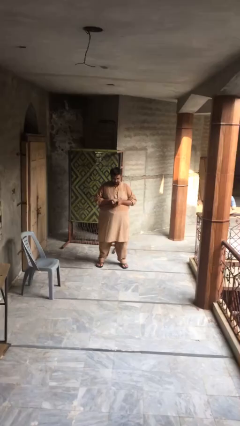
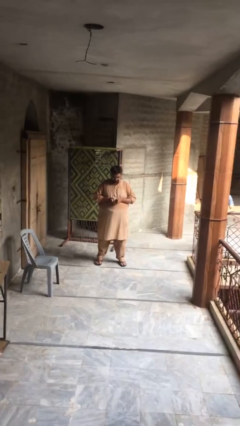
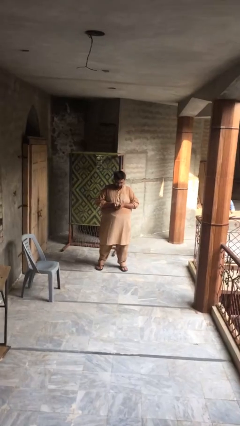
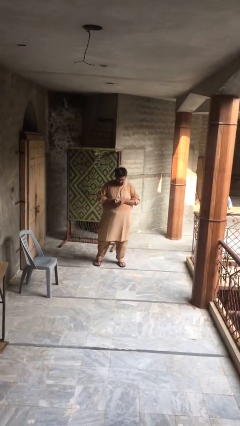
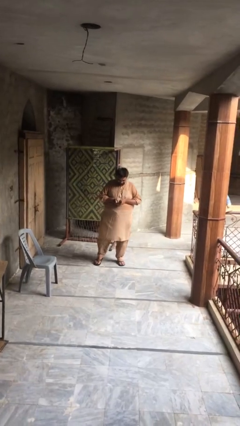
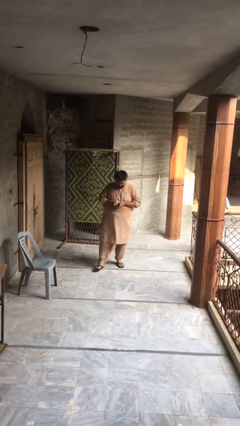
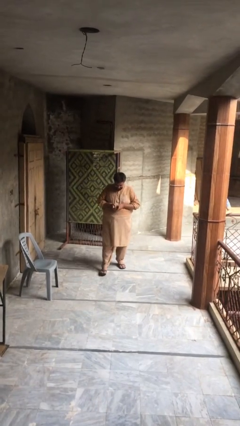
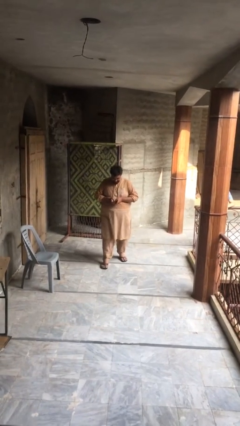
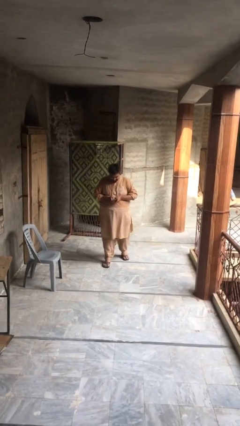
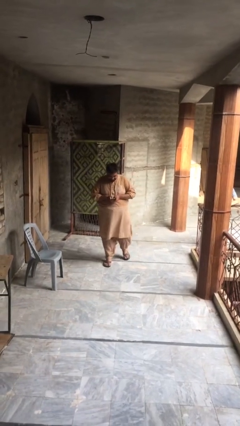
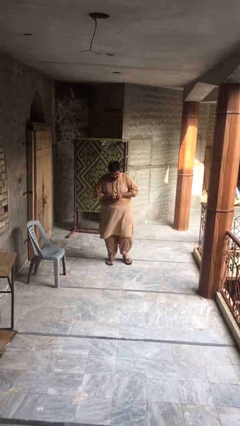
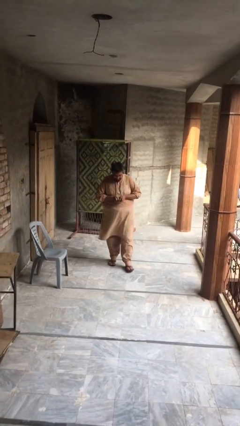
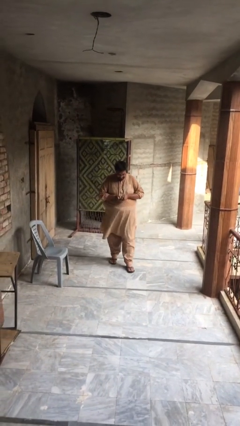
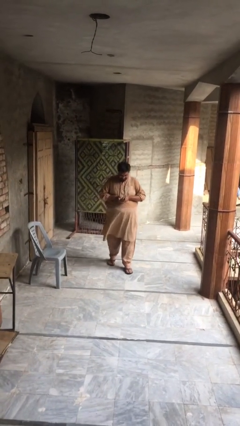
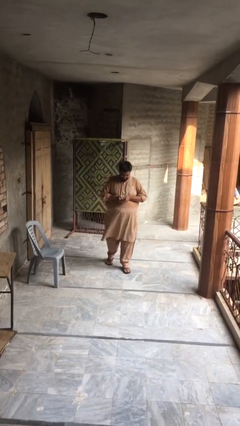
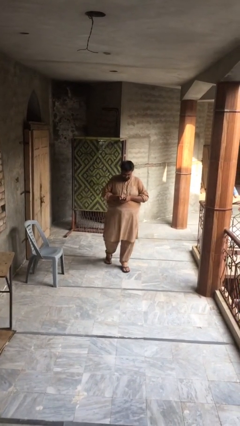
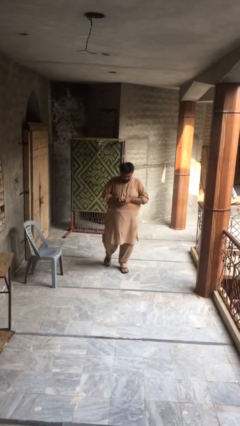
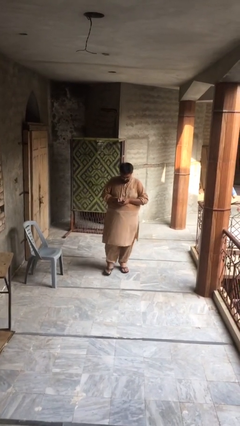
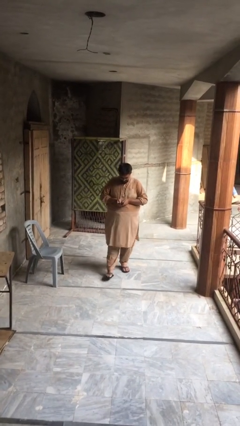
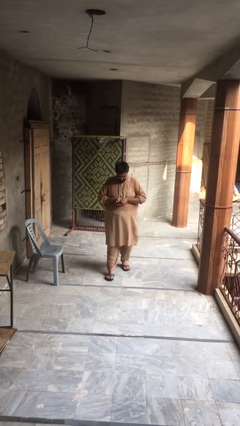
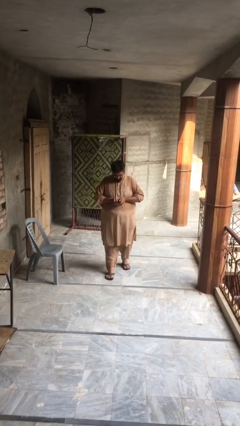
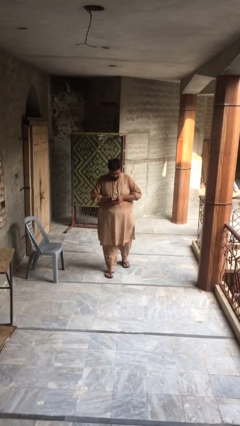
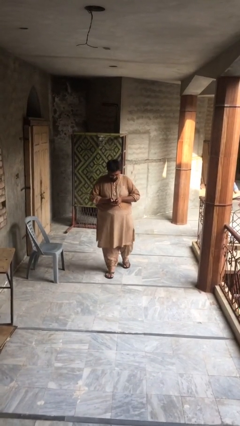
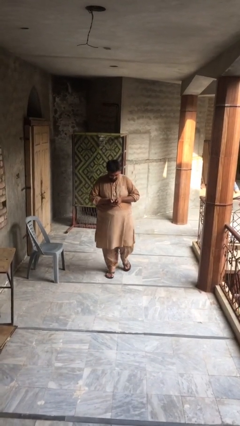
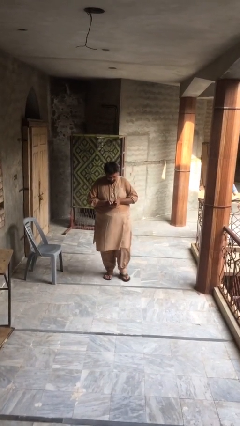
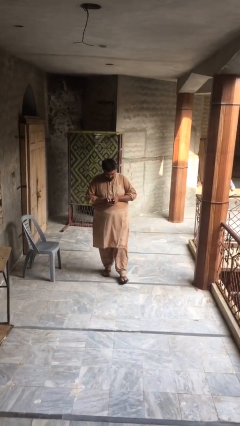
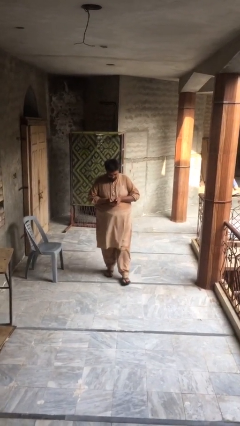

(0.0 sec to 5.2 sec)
person texts on phone

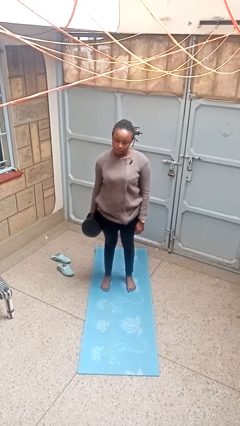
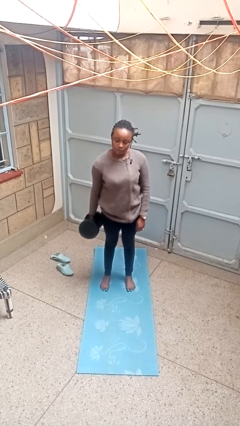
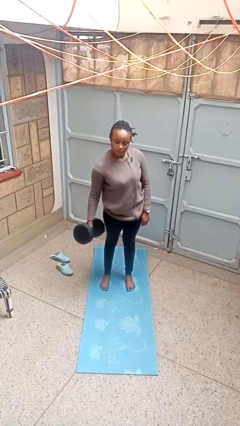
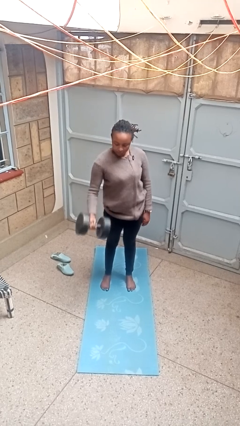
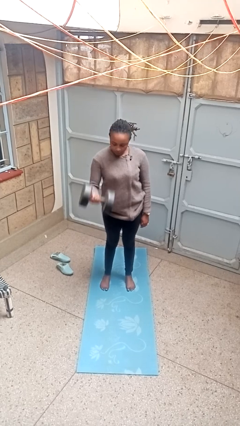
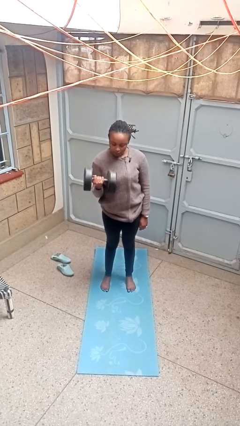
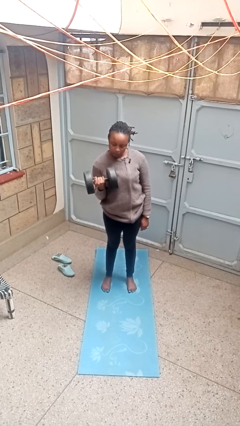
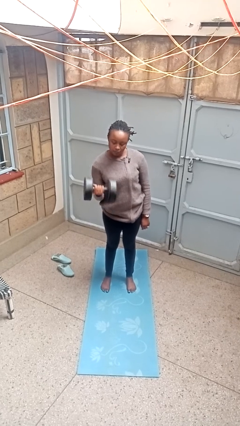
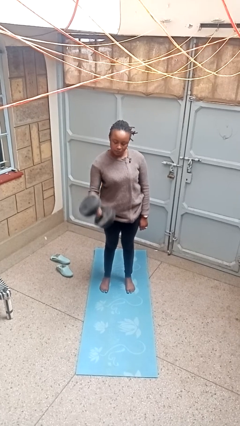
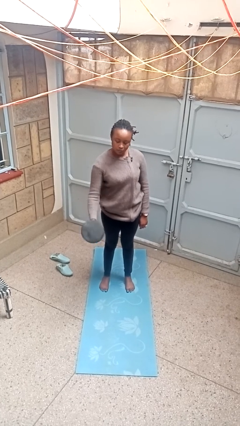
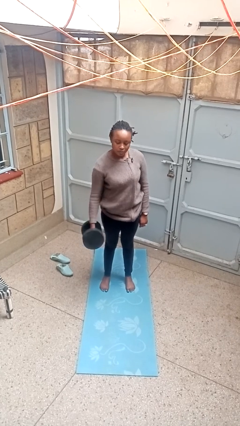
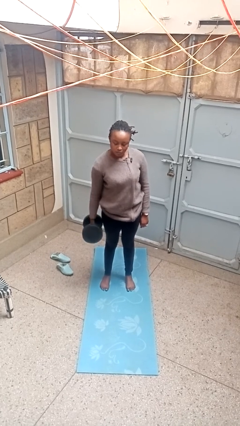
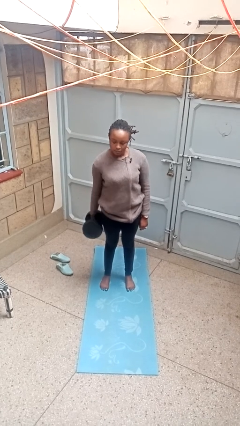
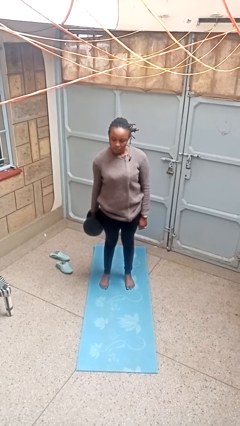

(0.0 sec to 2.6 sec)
person lifts dumbbells

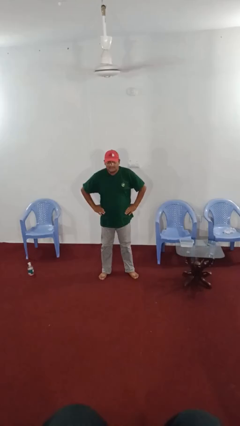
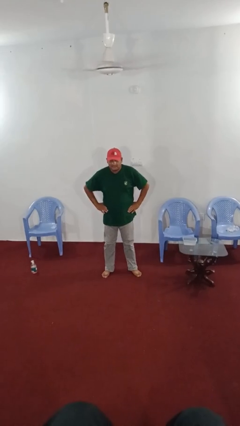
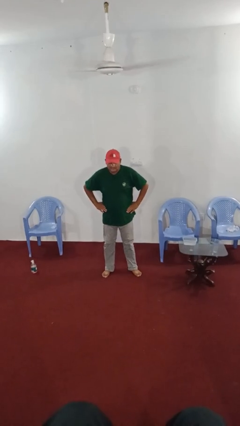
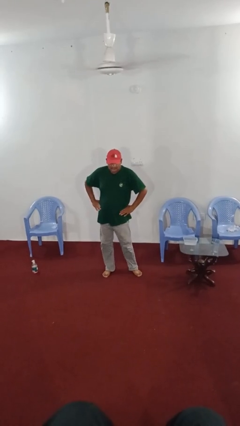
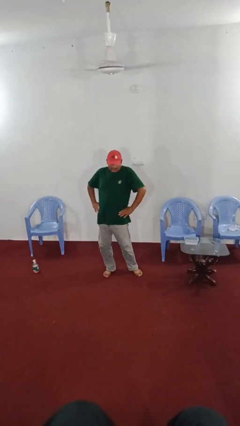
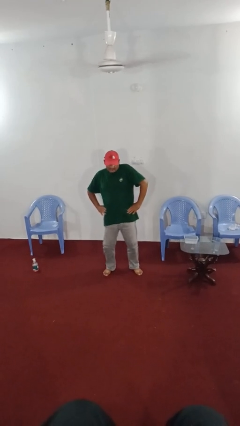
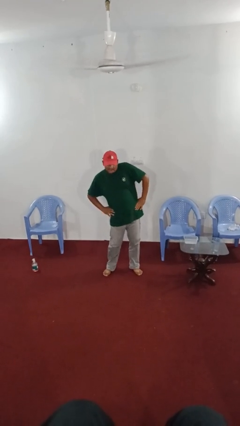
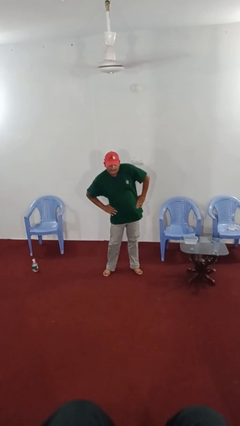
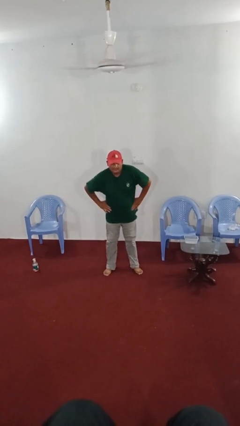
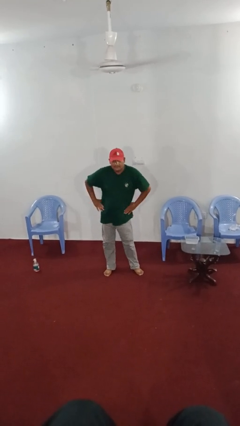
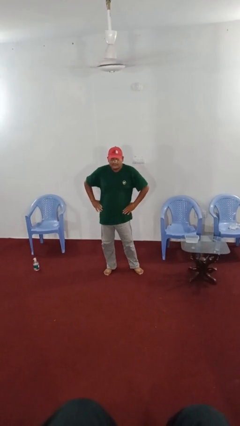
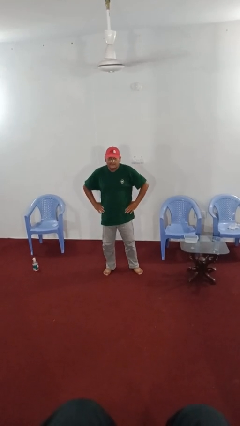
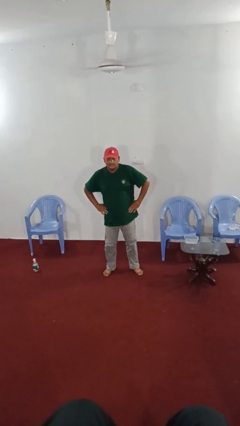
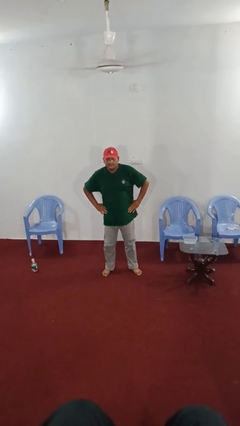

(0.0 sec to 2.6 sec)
person wiggles hips

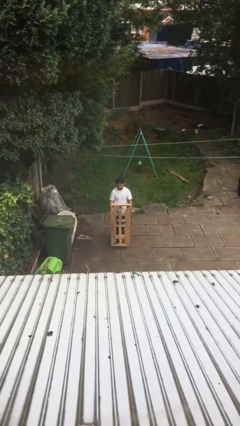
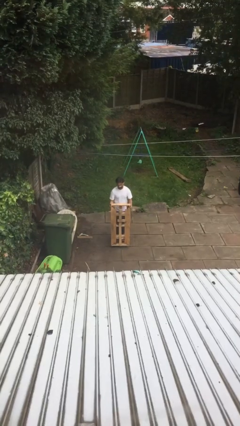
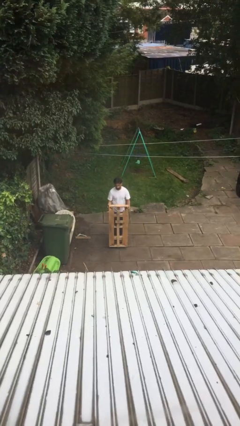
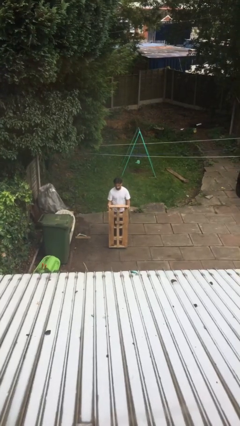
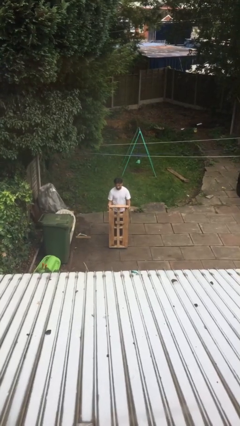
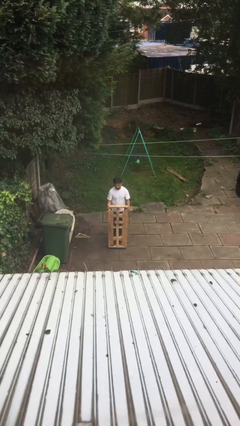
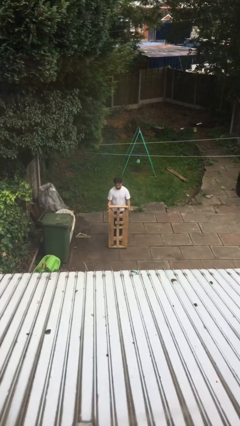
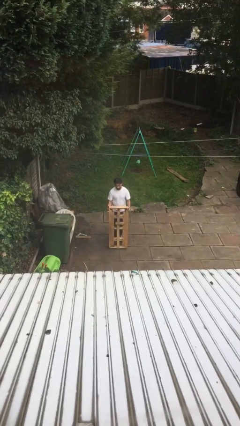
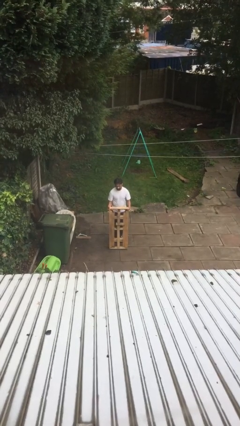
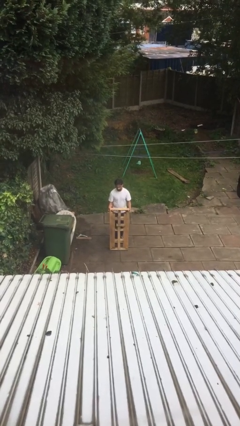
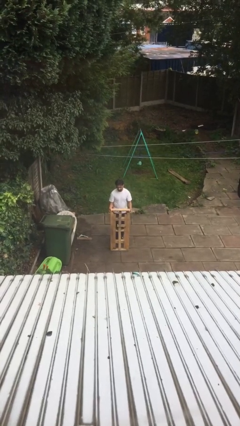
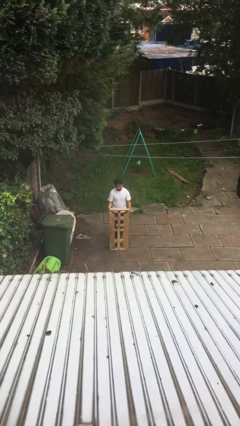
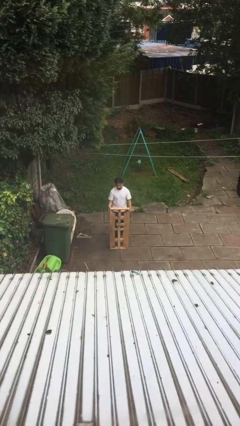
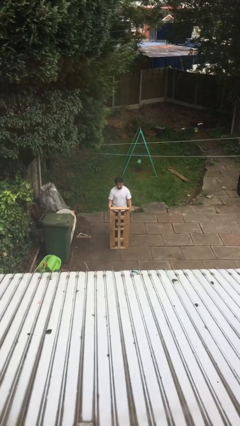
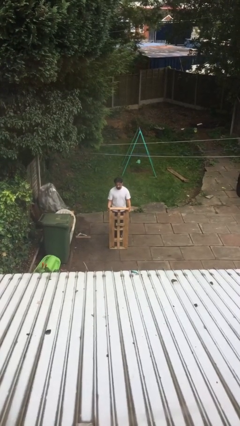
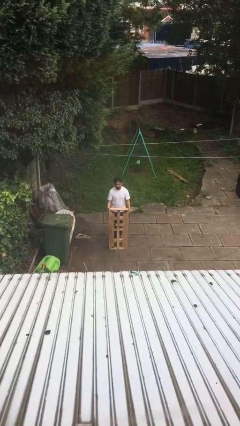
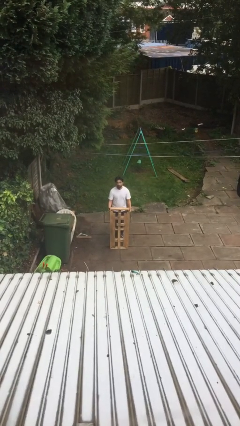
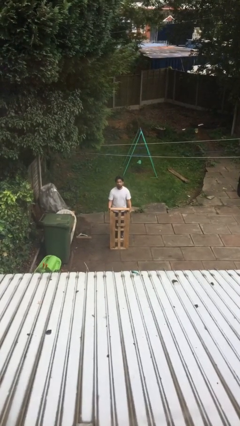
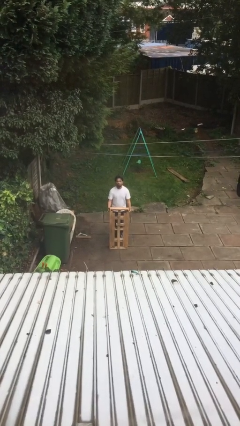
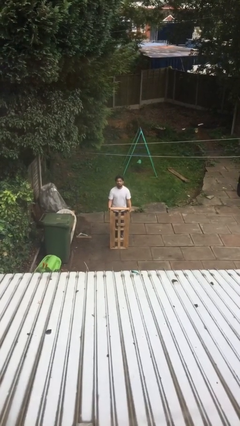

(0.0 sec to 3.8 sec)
person puts down object on floor

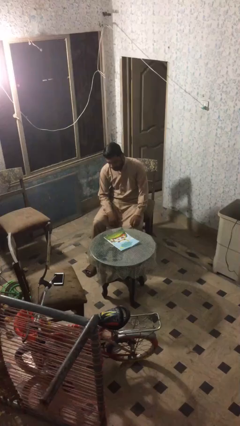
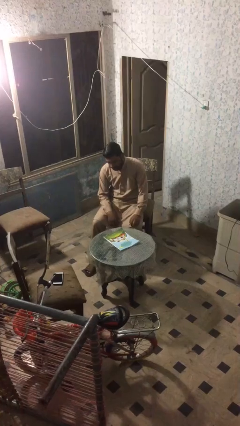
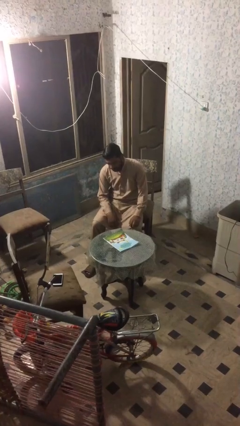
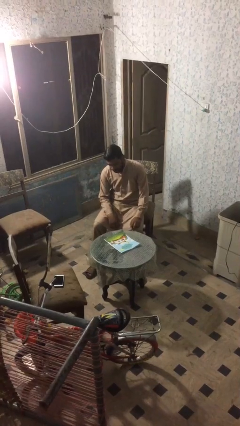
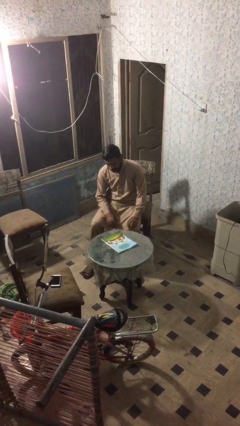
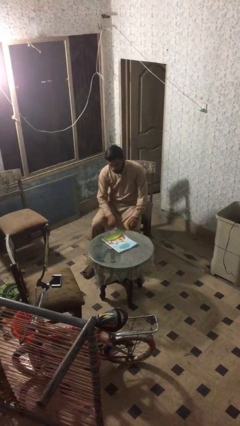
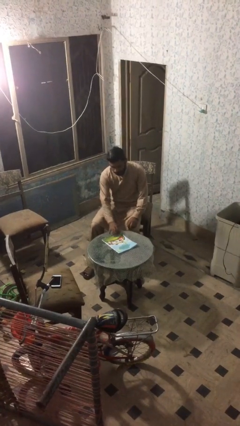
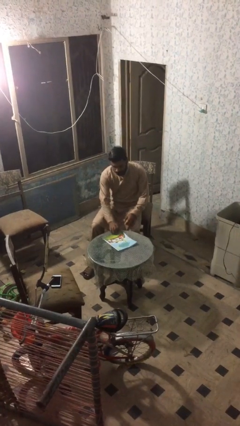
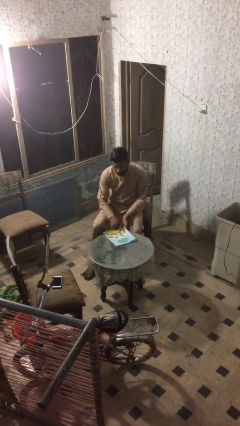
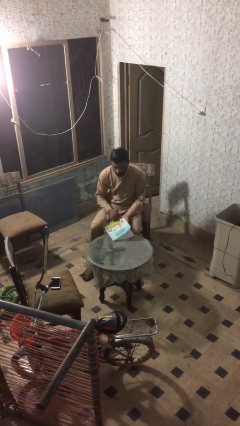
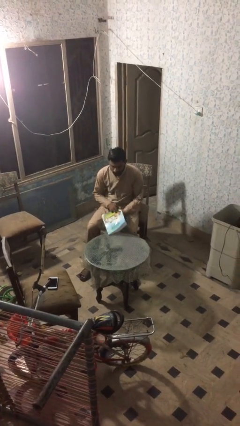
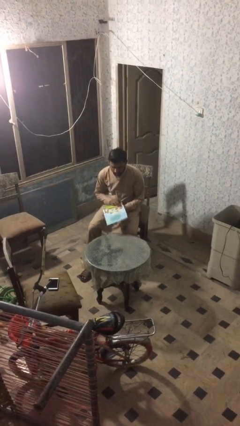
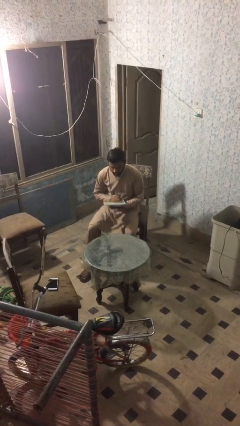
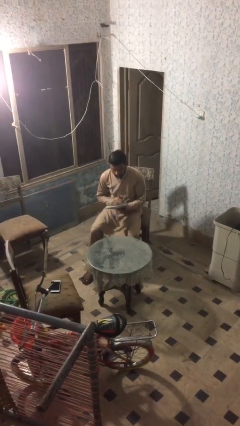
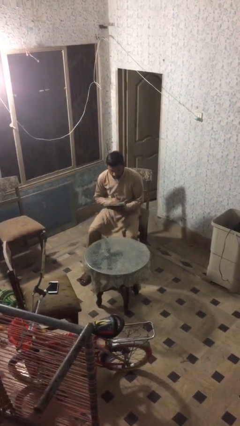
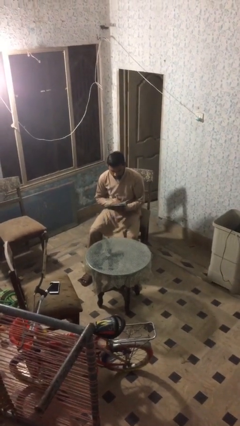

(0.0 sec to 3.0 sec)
person picks up object from table
